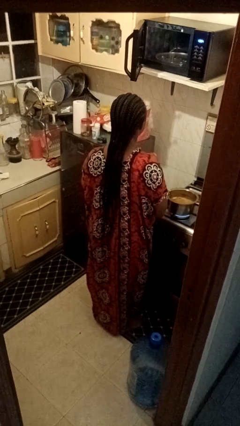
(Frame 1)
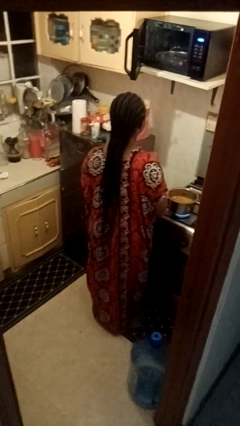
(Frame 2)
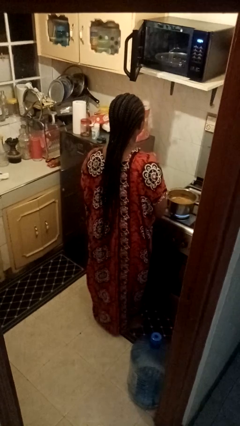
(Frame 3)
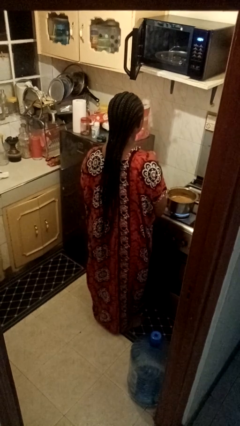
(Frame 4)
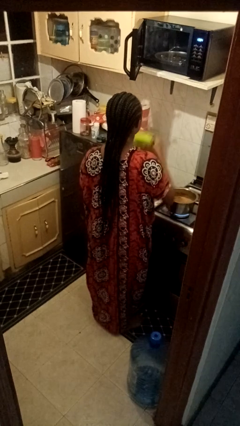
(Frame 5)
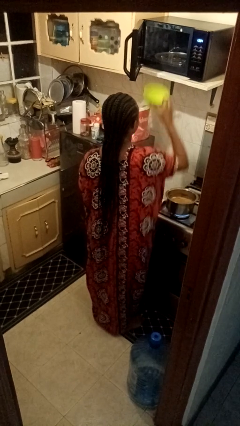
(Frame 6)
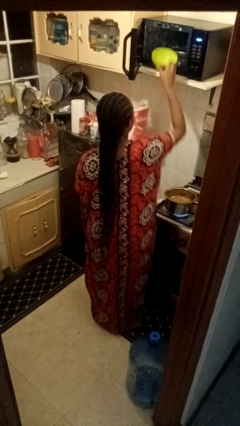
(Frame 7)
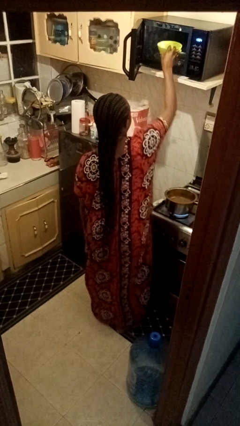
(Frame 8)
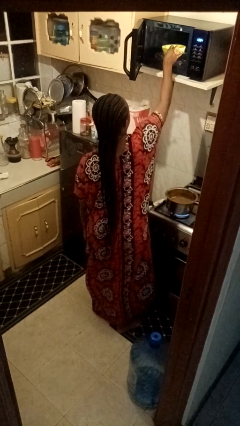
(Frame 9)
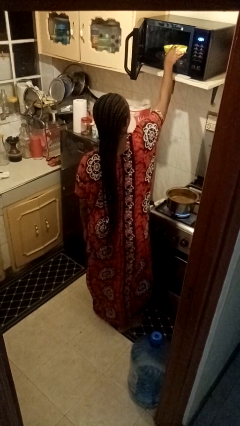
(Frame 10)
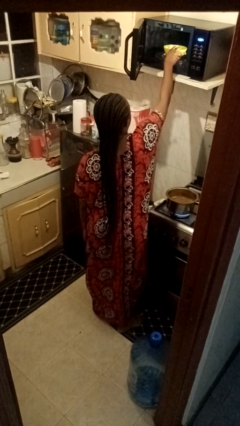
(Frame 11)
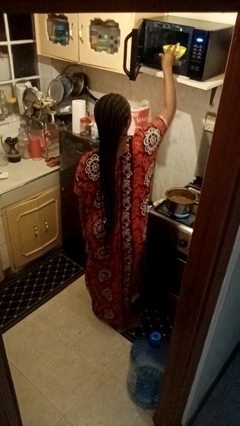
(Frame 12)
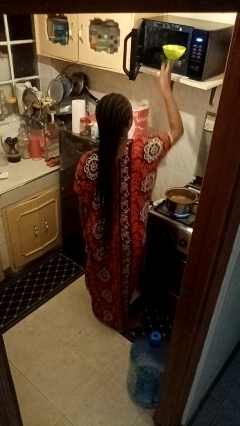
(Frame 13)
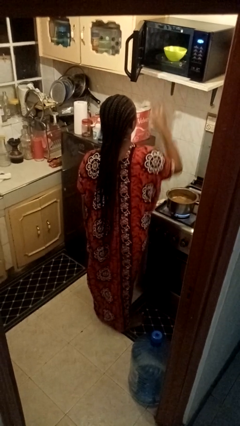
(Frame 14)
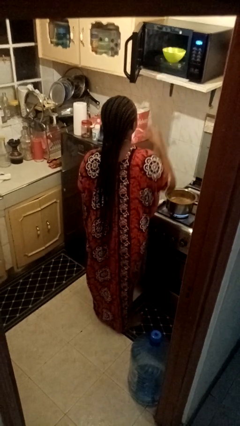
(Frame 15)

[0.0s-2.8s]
person puts object into microwave

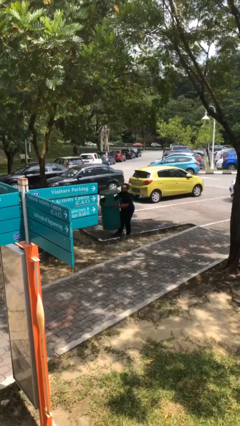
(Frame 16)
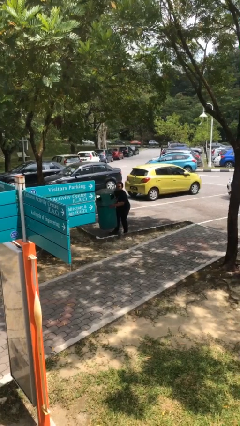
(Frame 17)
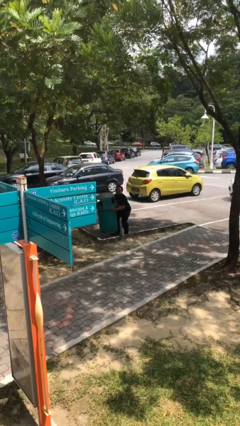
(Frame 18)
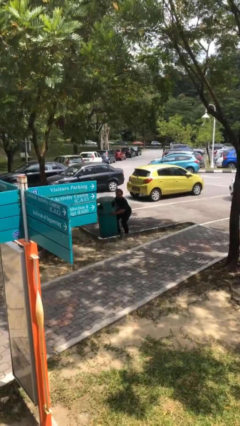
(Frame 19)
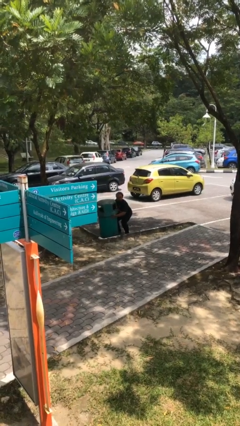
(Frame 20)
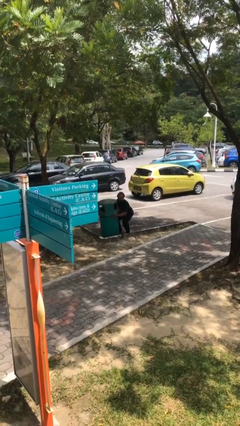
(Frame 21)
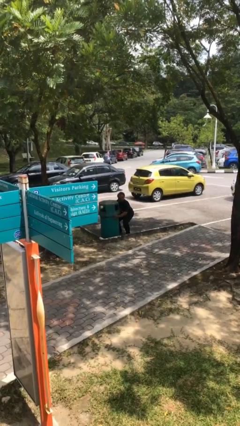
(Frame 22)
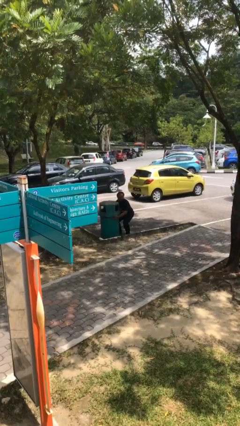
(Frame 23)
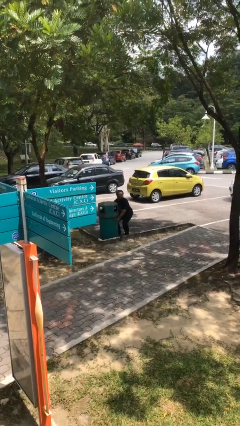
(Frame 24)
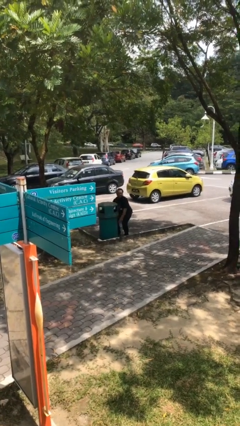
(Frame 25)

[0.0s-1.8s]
person puts down object on floor

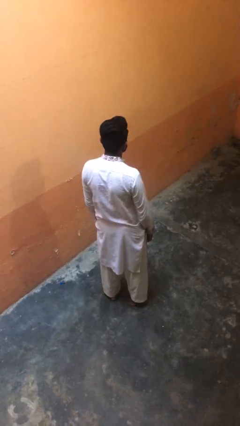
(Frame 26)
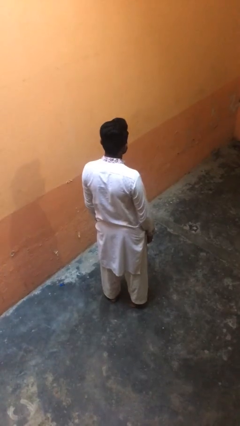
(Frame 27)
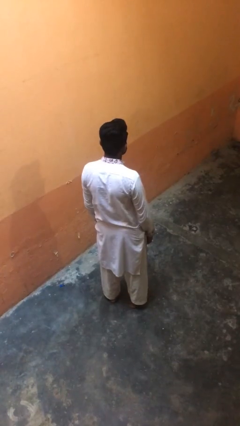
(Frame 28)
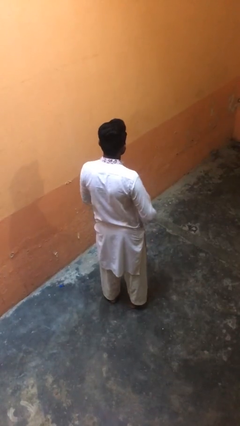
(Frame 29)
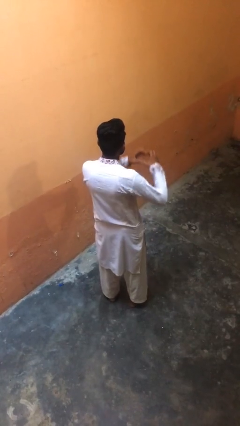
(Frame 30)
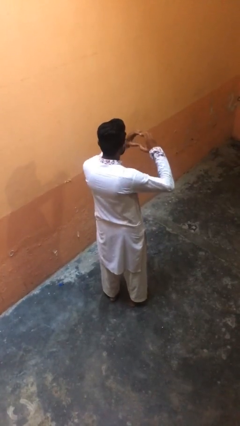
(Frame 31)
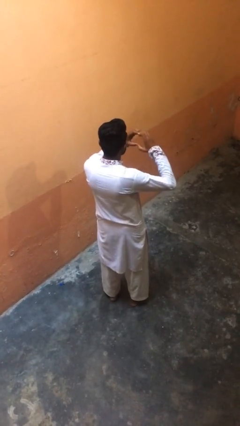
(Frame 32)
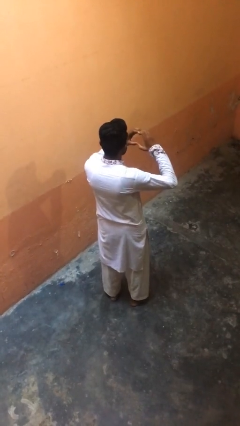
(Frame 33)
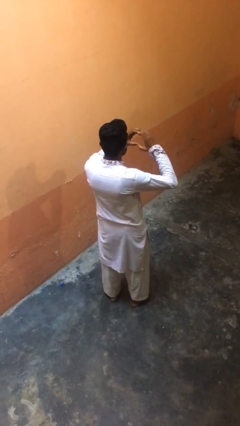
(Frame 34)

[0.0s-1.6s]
person gestures heart

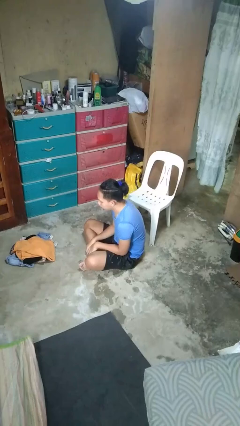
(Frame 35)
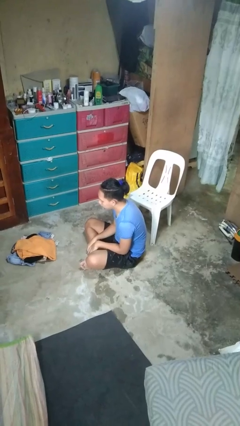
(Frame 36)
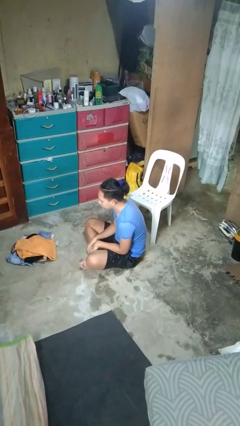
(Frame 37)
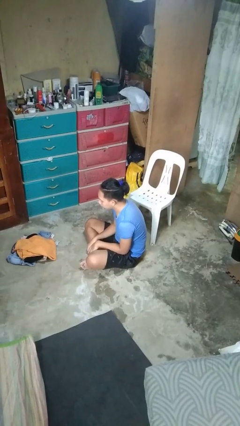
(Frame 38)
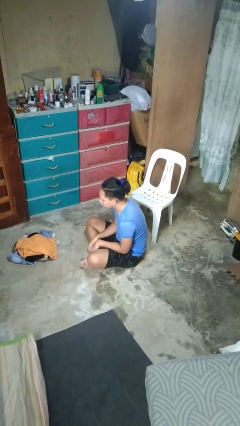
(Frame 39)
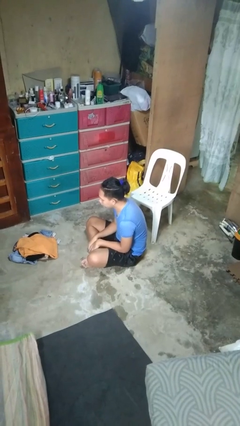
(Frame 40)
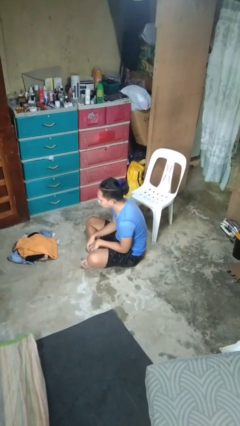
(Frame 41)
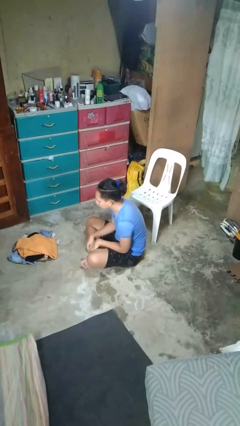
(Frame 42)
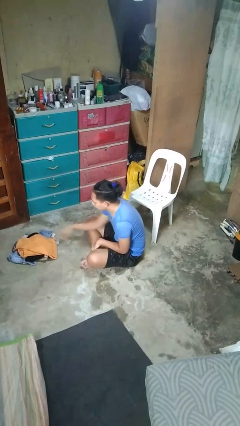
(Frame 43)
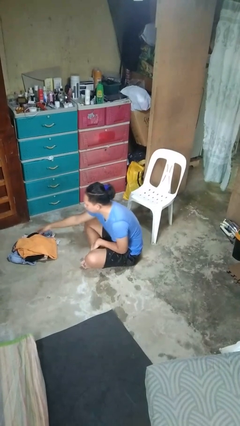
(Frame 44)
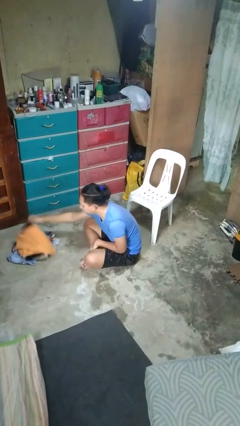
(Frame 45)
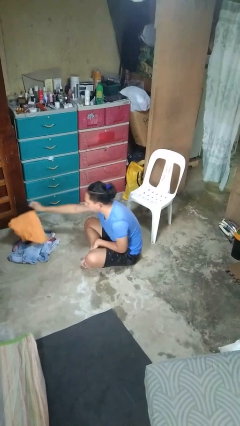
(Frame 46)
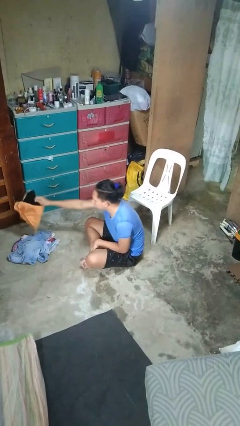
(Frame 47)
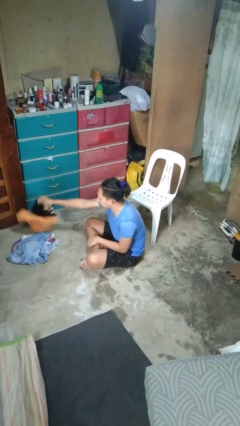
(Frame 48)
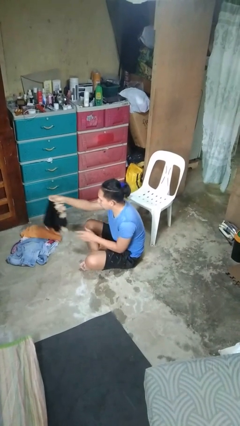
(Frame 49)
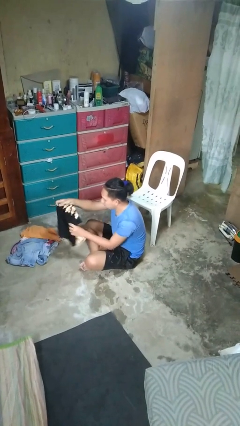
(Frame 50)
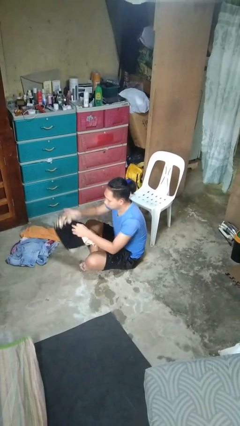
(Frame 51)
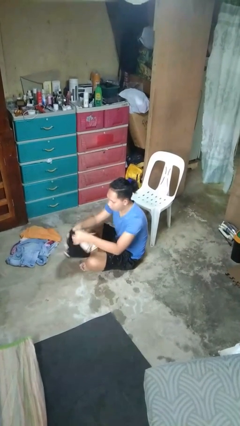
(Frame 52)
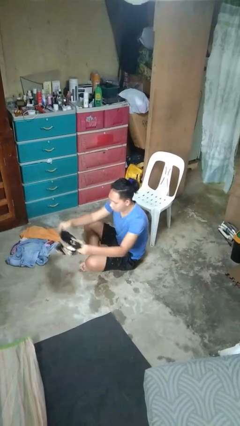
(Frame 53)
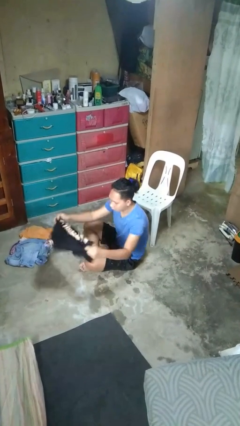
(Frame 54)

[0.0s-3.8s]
person folds shirt

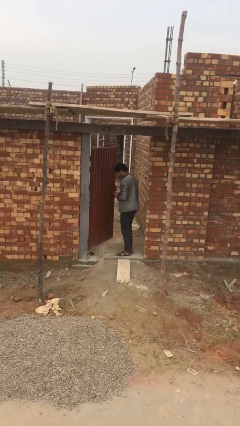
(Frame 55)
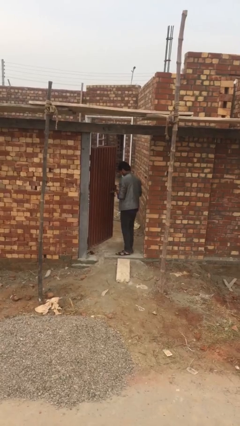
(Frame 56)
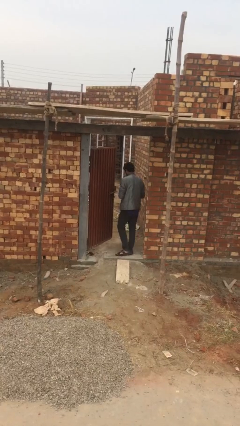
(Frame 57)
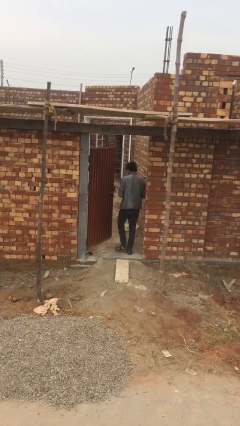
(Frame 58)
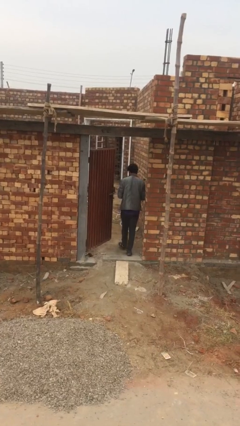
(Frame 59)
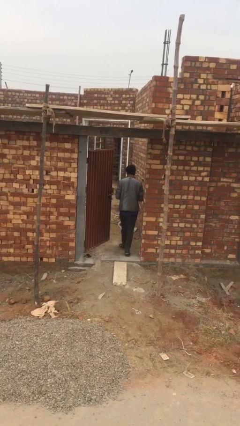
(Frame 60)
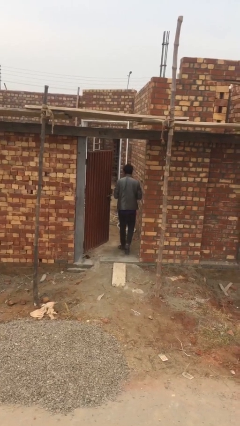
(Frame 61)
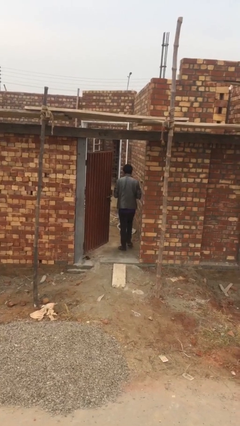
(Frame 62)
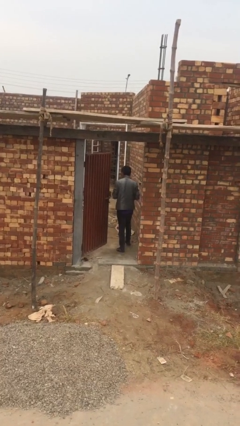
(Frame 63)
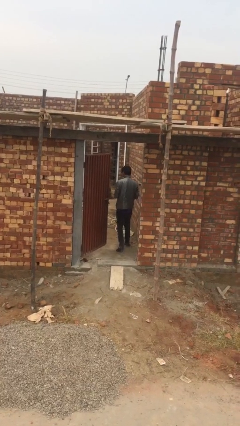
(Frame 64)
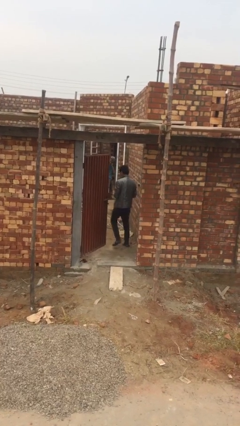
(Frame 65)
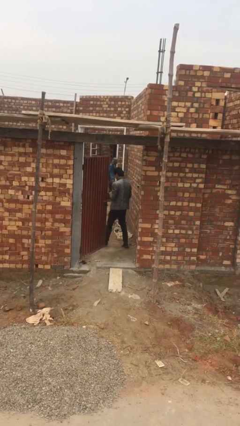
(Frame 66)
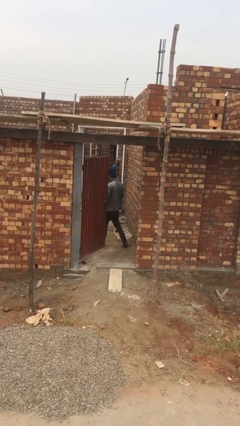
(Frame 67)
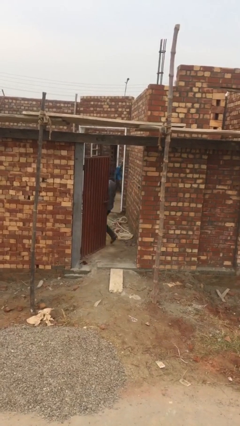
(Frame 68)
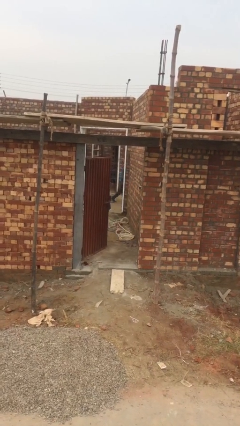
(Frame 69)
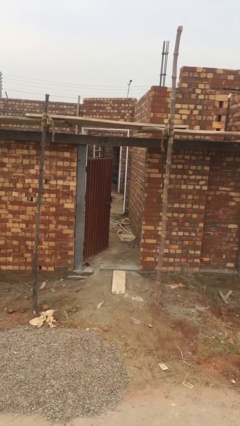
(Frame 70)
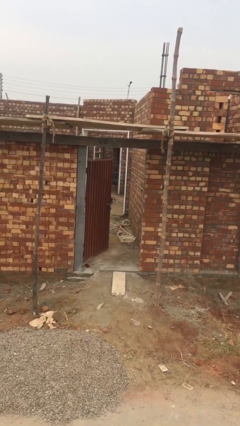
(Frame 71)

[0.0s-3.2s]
person exits scene through structure

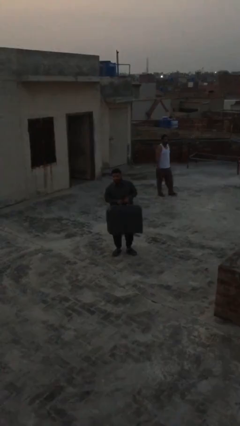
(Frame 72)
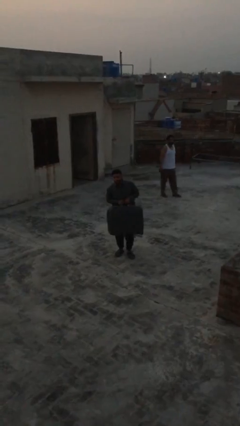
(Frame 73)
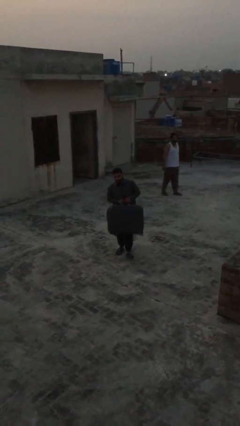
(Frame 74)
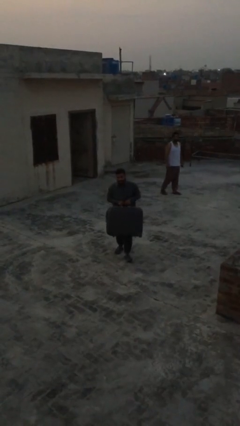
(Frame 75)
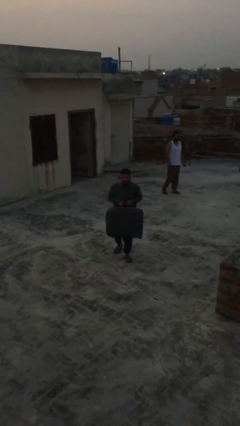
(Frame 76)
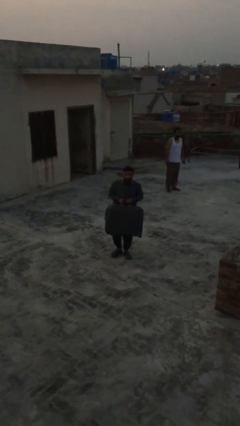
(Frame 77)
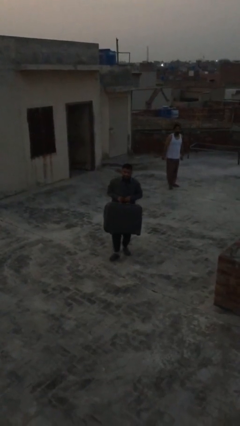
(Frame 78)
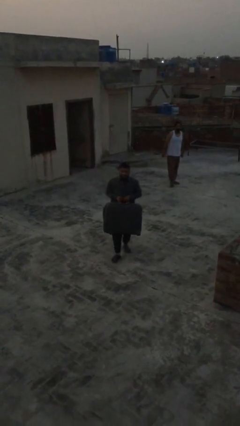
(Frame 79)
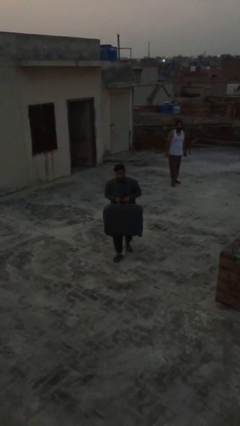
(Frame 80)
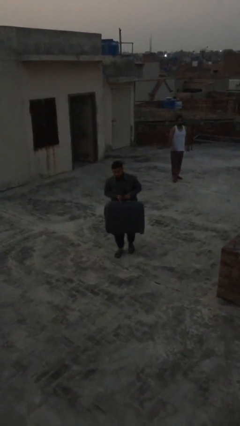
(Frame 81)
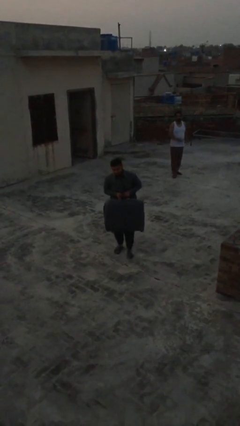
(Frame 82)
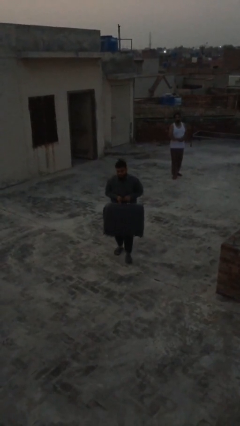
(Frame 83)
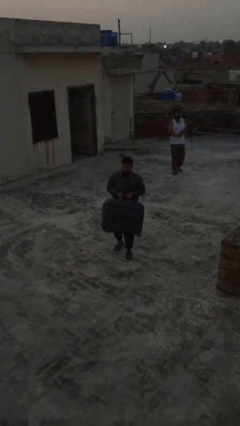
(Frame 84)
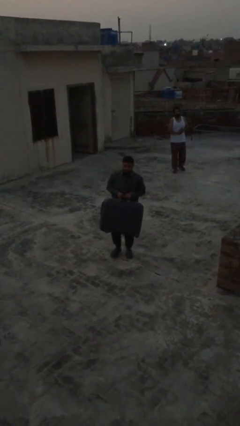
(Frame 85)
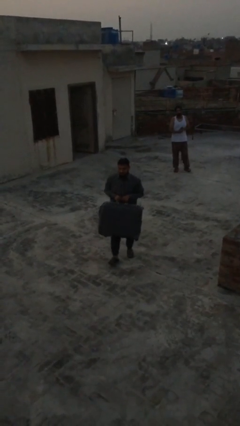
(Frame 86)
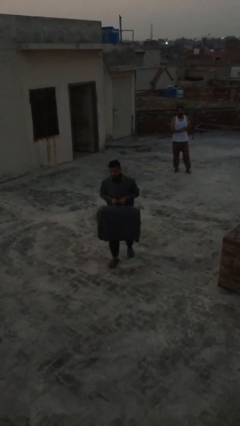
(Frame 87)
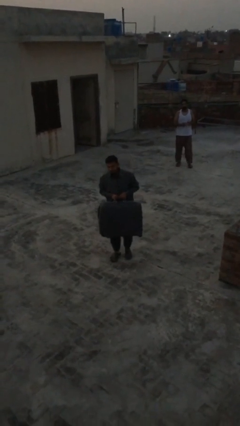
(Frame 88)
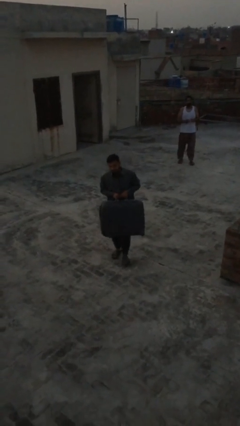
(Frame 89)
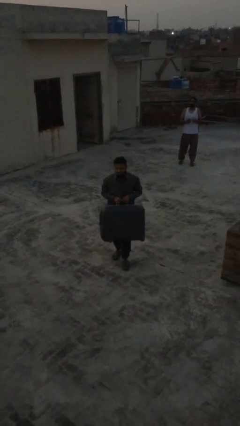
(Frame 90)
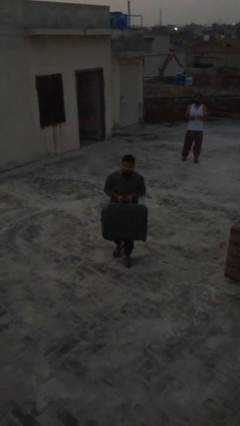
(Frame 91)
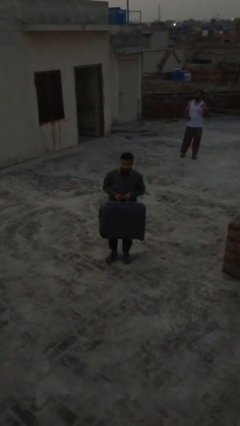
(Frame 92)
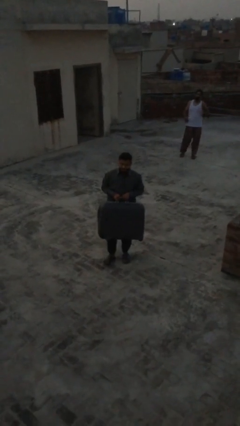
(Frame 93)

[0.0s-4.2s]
person carries heavy object
